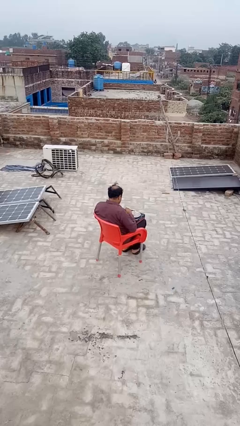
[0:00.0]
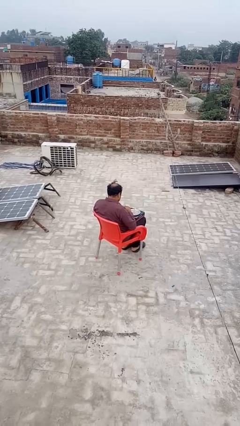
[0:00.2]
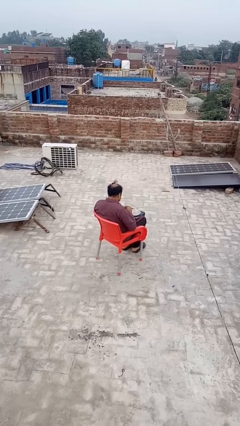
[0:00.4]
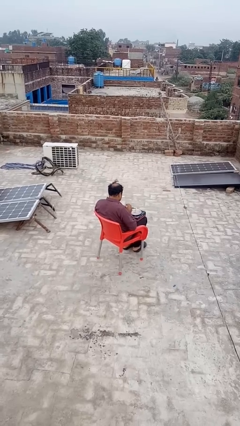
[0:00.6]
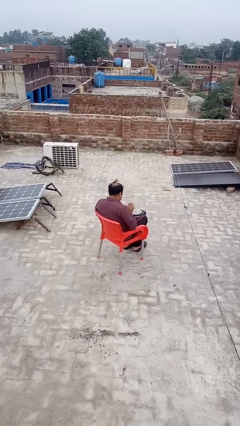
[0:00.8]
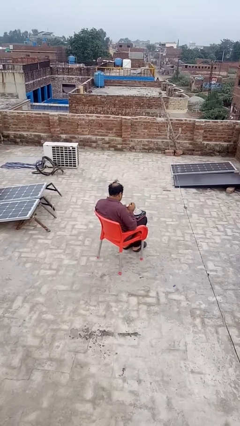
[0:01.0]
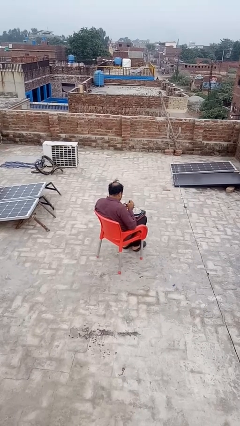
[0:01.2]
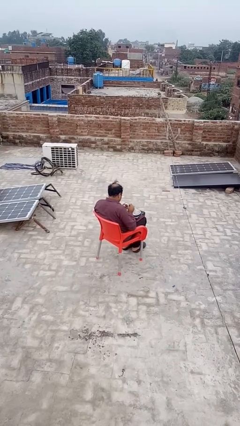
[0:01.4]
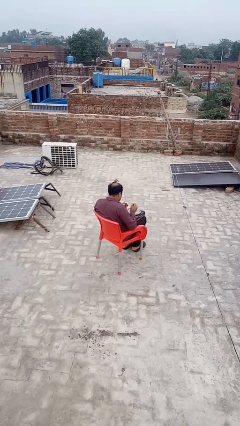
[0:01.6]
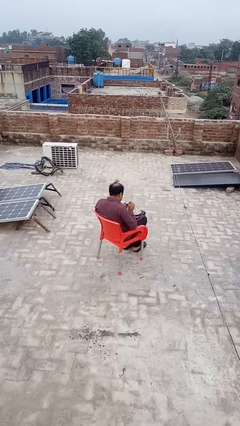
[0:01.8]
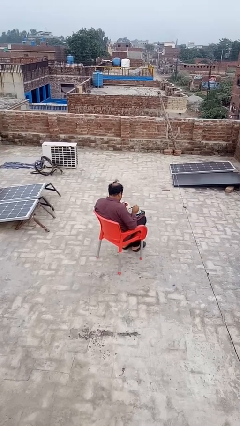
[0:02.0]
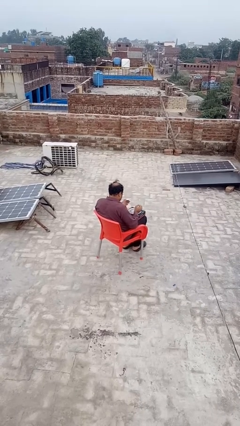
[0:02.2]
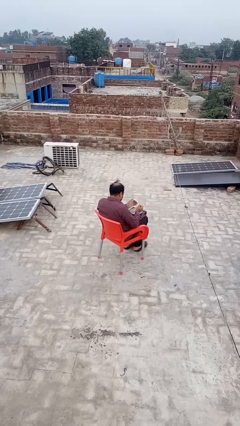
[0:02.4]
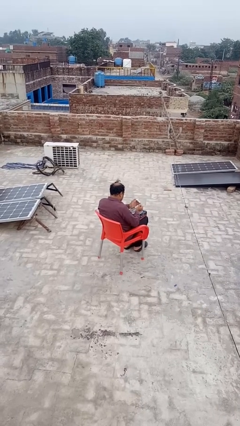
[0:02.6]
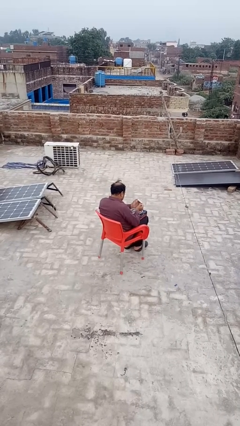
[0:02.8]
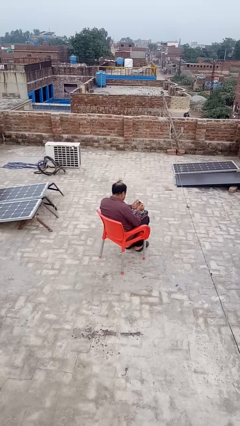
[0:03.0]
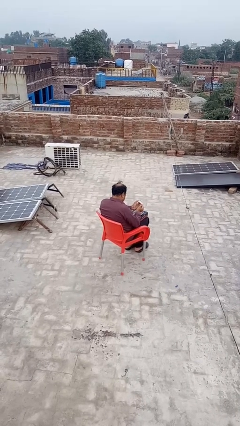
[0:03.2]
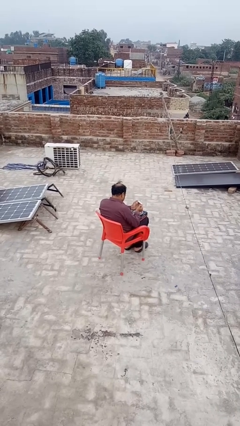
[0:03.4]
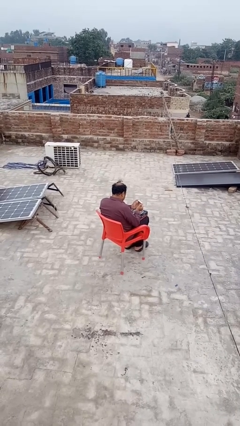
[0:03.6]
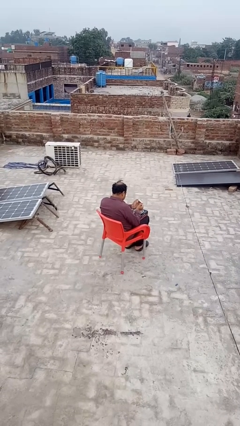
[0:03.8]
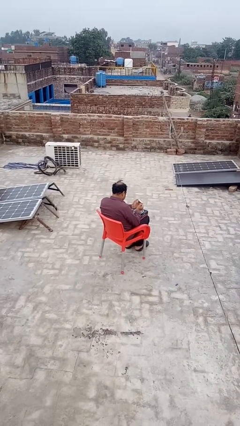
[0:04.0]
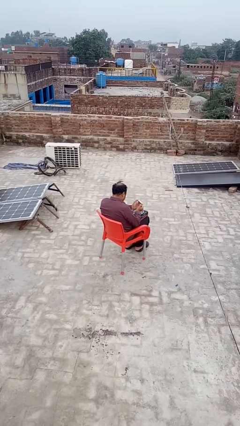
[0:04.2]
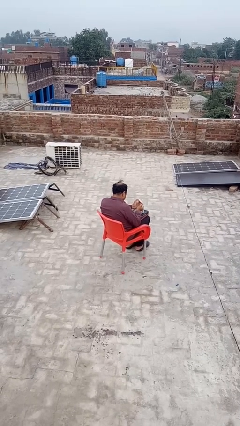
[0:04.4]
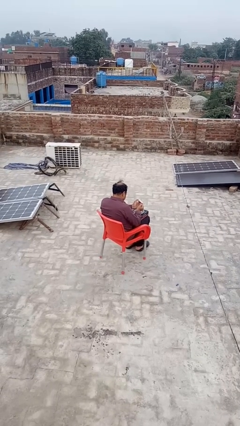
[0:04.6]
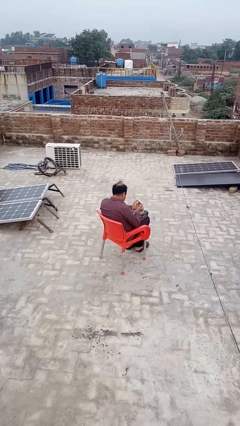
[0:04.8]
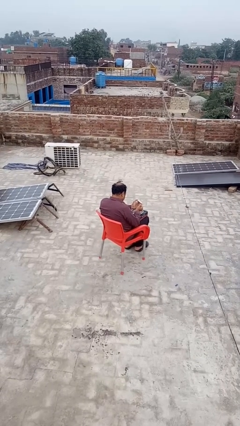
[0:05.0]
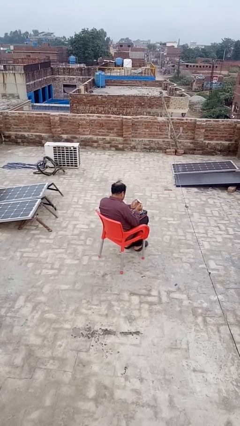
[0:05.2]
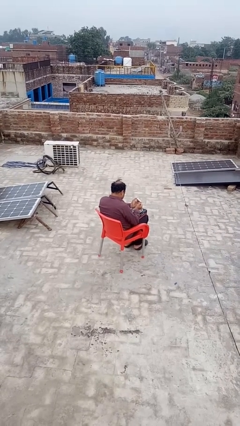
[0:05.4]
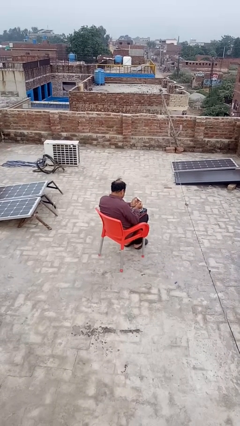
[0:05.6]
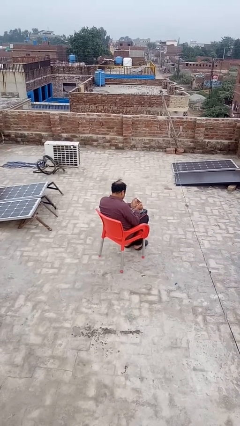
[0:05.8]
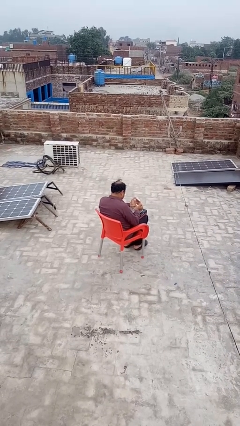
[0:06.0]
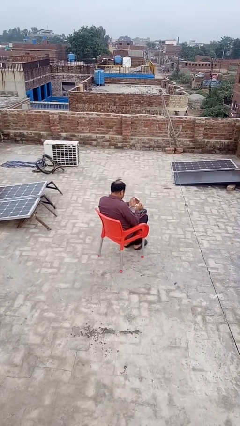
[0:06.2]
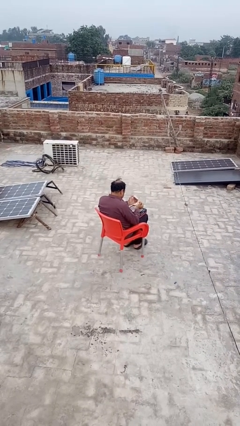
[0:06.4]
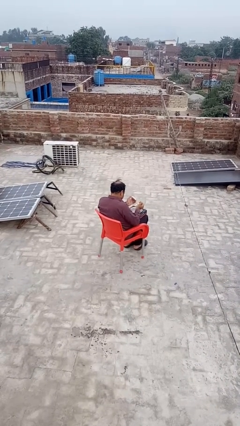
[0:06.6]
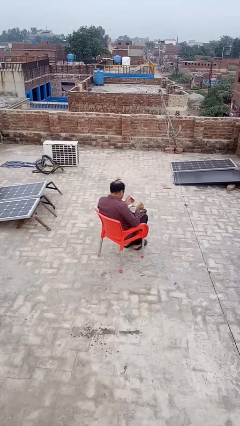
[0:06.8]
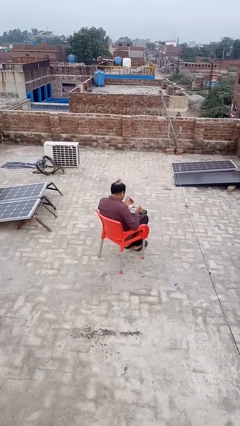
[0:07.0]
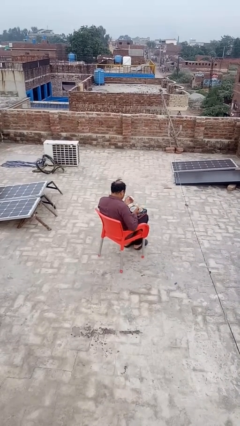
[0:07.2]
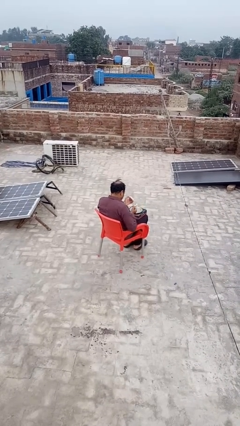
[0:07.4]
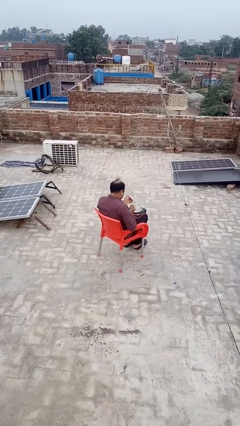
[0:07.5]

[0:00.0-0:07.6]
person lights candle

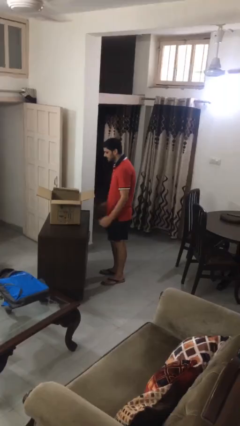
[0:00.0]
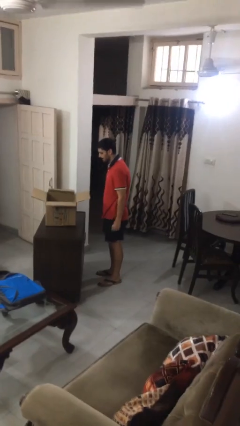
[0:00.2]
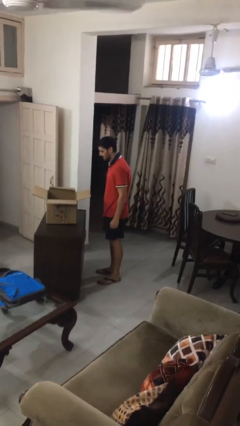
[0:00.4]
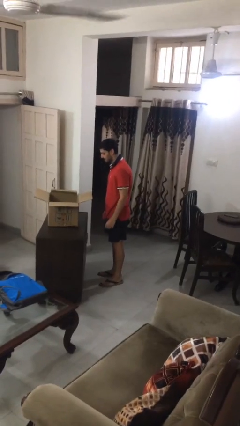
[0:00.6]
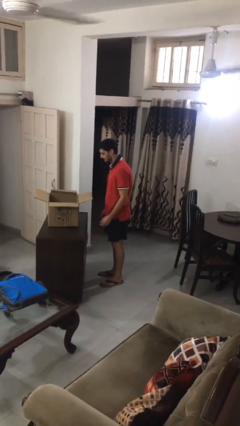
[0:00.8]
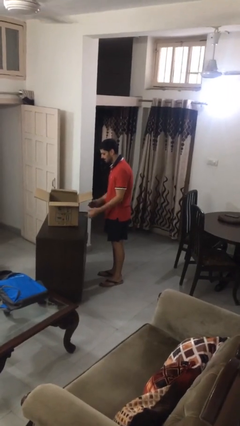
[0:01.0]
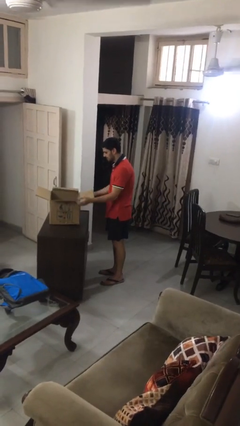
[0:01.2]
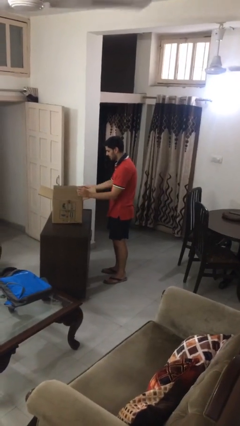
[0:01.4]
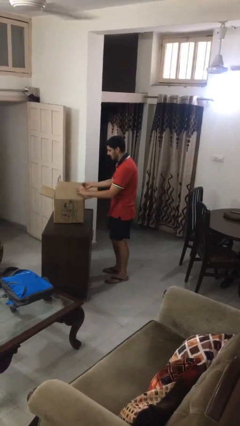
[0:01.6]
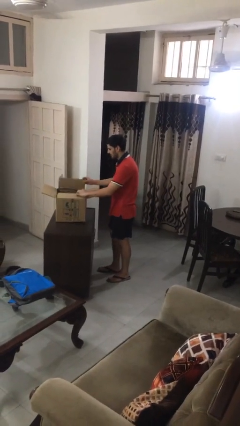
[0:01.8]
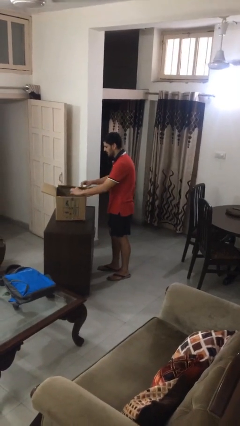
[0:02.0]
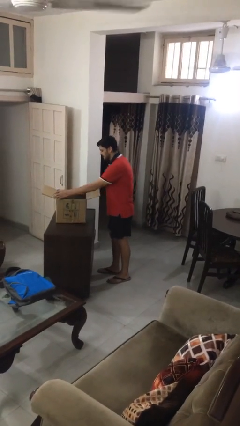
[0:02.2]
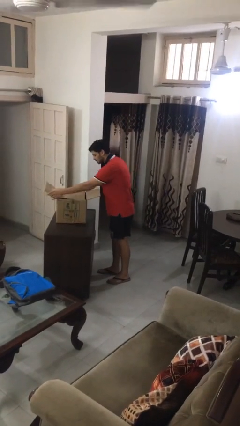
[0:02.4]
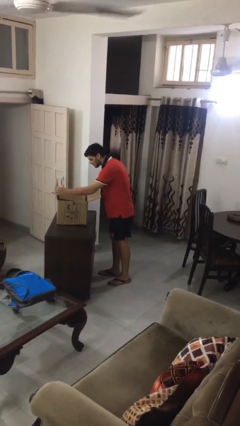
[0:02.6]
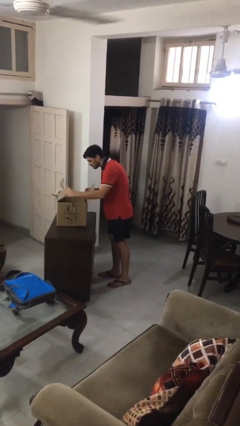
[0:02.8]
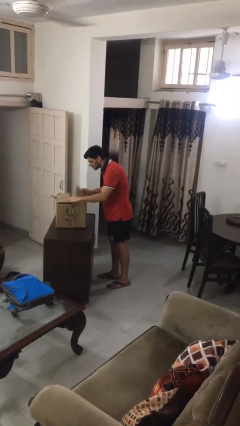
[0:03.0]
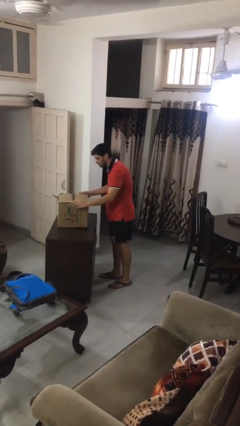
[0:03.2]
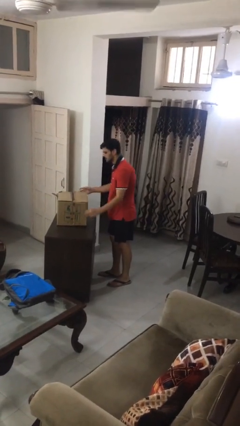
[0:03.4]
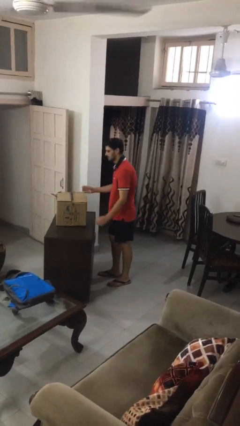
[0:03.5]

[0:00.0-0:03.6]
person closes box

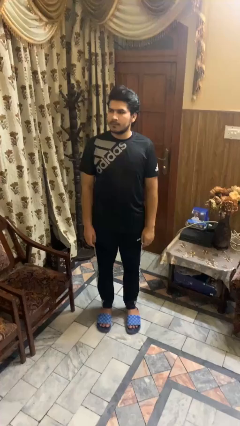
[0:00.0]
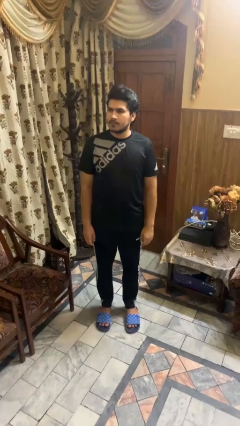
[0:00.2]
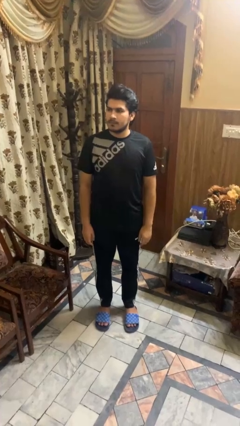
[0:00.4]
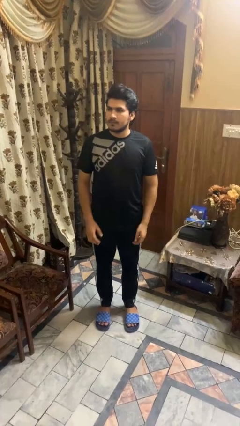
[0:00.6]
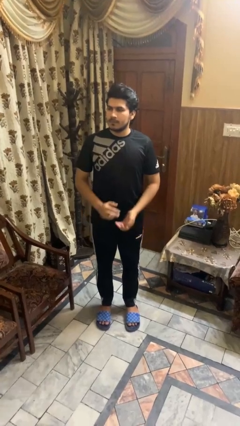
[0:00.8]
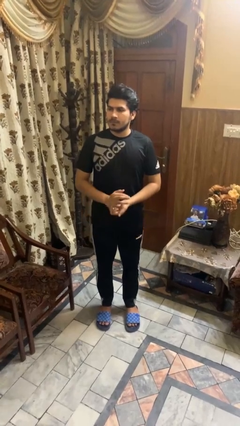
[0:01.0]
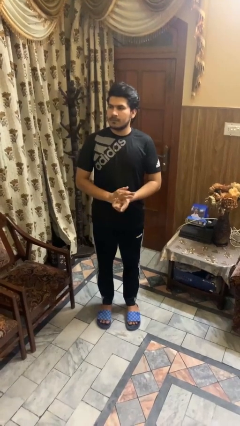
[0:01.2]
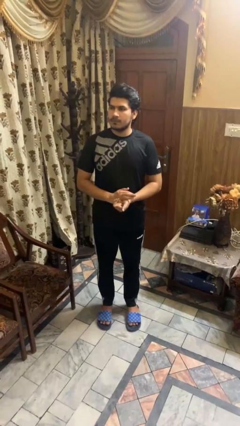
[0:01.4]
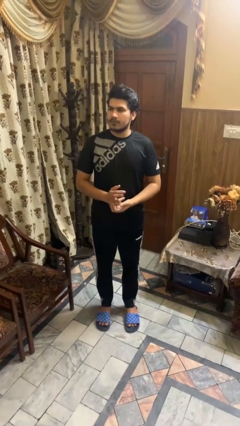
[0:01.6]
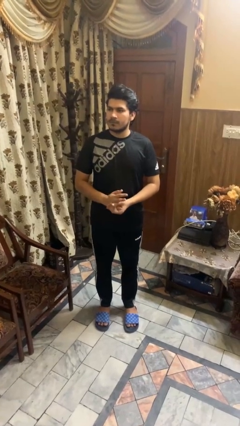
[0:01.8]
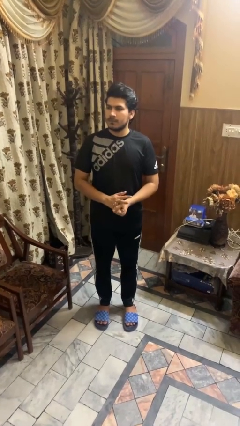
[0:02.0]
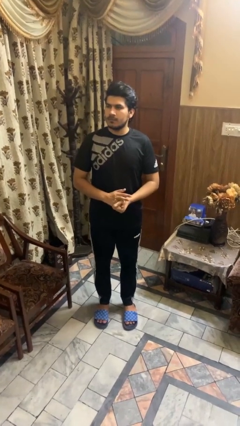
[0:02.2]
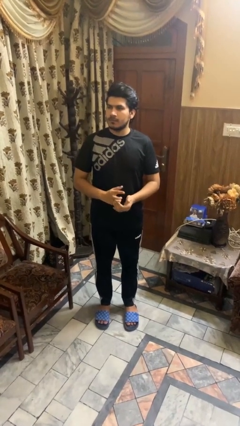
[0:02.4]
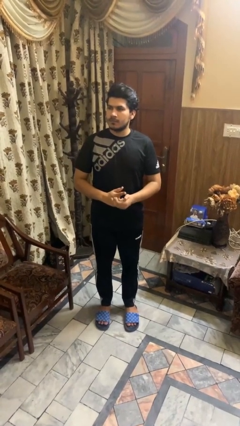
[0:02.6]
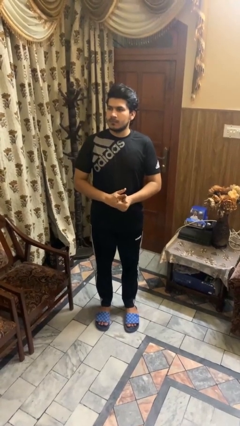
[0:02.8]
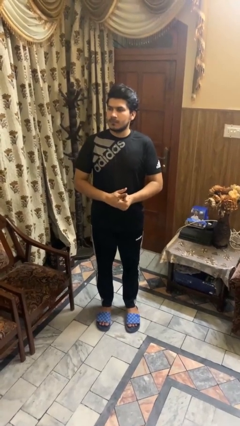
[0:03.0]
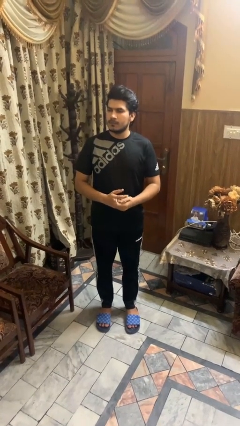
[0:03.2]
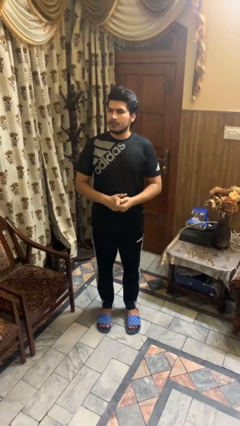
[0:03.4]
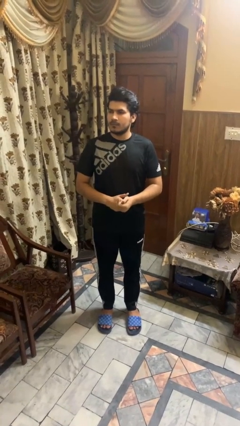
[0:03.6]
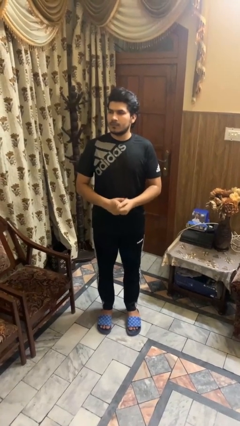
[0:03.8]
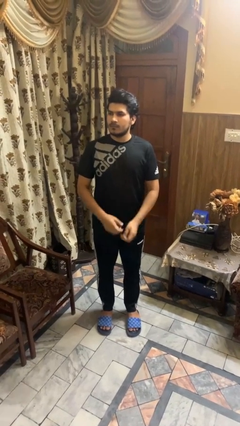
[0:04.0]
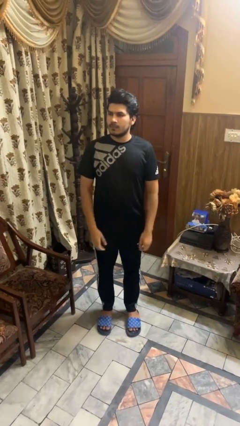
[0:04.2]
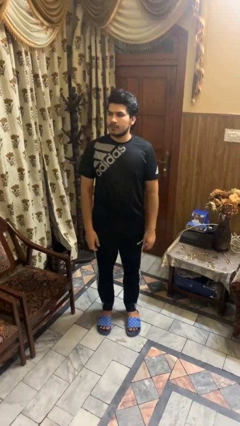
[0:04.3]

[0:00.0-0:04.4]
person cracks knuckles

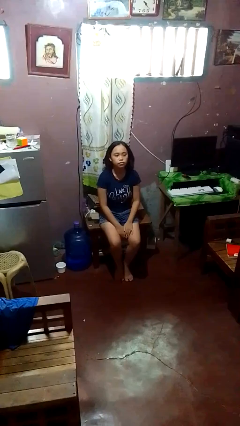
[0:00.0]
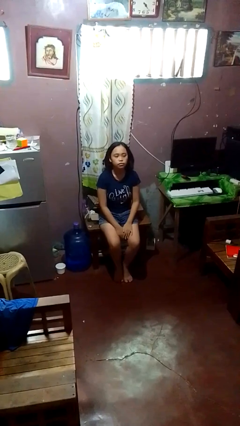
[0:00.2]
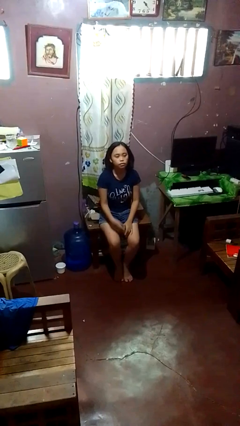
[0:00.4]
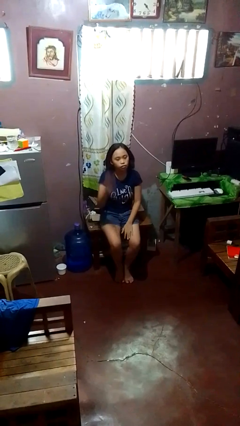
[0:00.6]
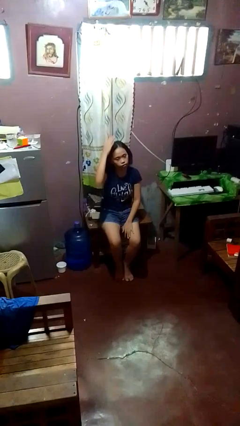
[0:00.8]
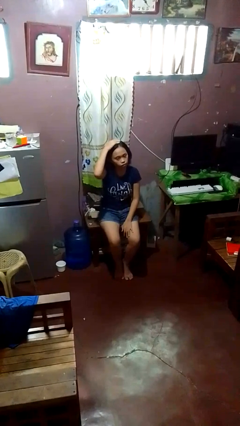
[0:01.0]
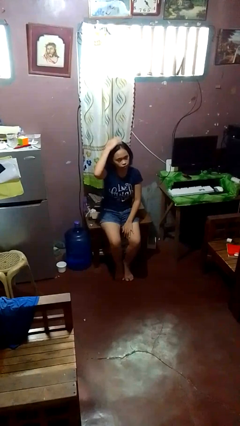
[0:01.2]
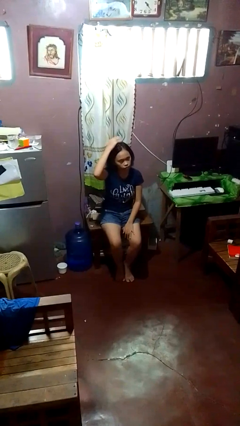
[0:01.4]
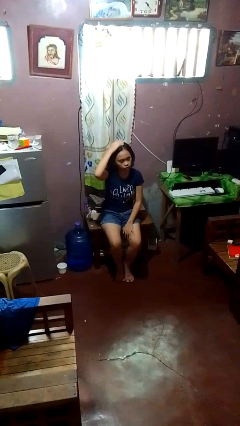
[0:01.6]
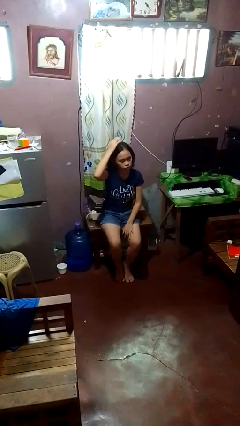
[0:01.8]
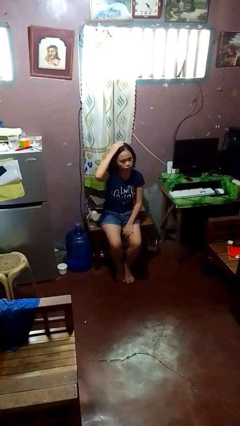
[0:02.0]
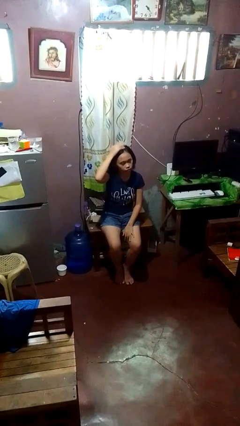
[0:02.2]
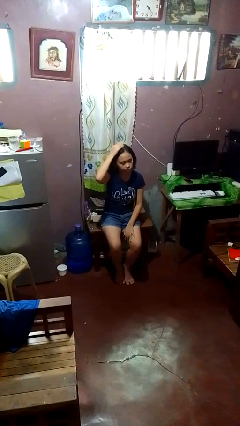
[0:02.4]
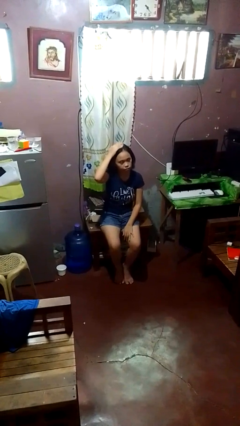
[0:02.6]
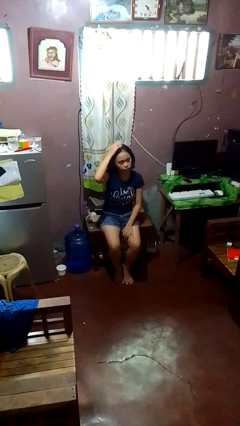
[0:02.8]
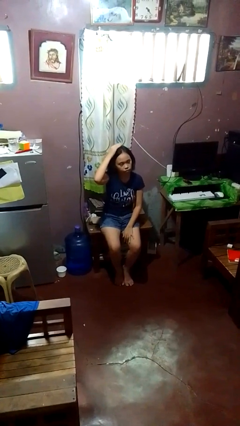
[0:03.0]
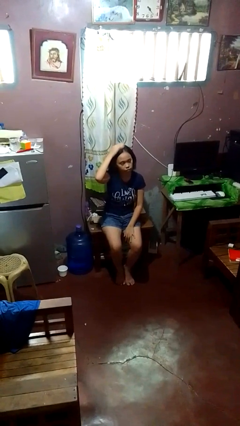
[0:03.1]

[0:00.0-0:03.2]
person pats head
